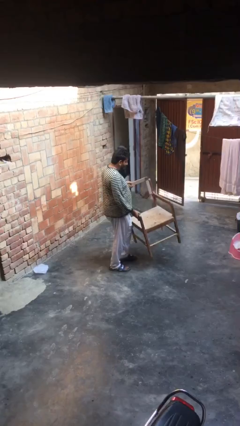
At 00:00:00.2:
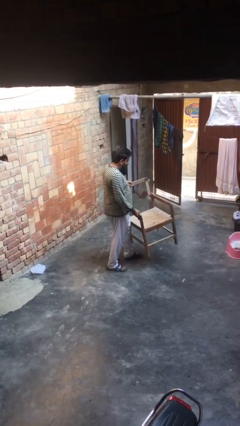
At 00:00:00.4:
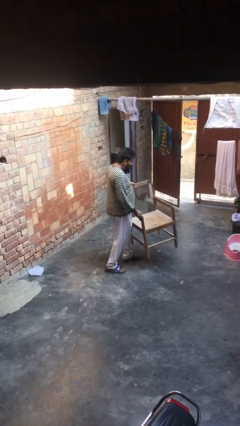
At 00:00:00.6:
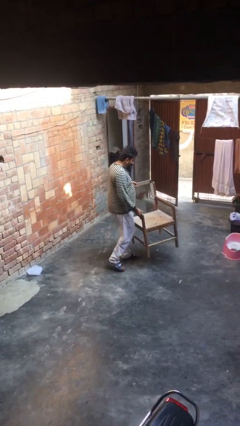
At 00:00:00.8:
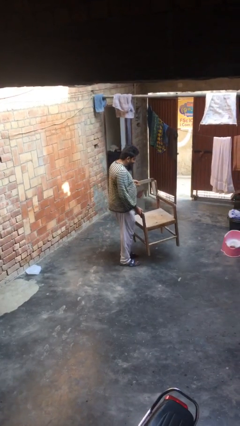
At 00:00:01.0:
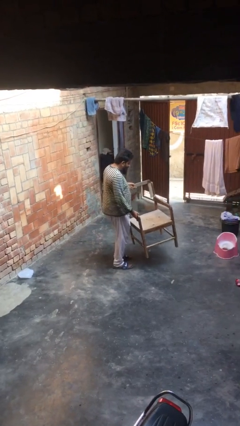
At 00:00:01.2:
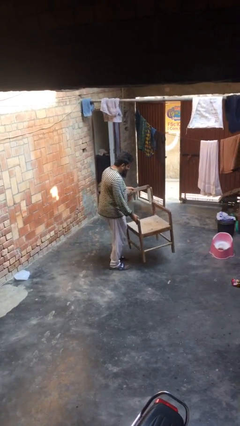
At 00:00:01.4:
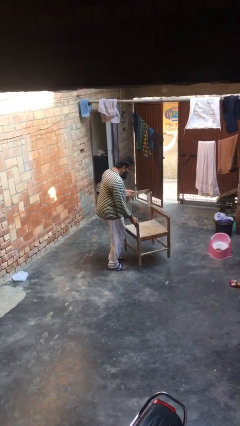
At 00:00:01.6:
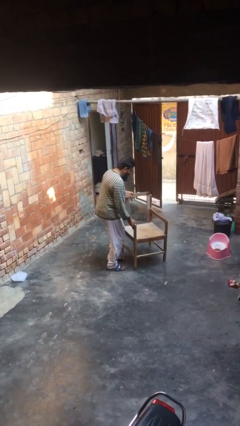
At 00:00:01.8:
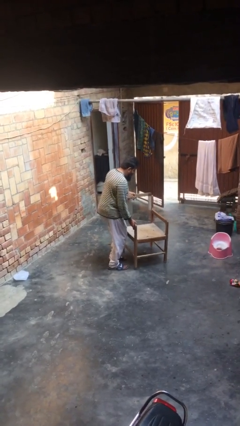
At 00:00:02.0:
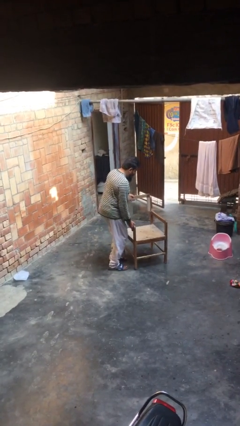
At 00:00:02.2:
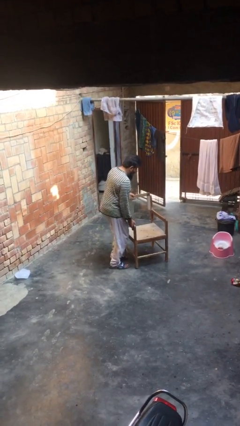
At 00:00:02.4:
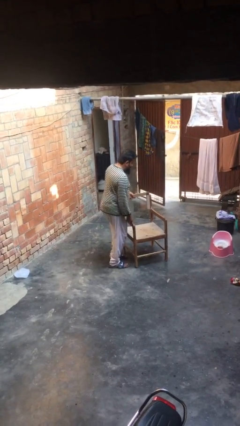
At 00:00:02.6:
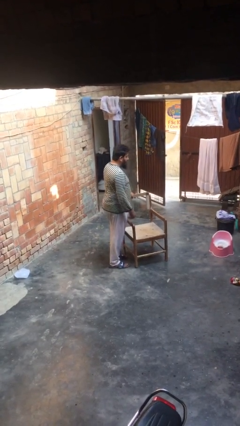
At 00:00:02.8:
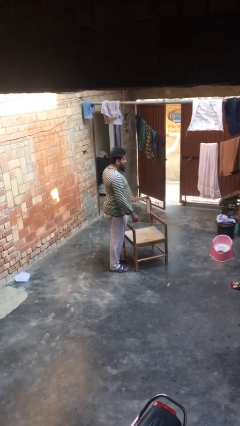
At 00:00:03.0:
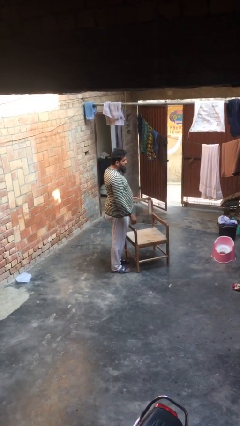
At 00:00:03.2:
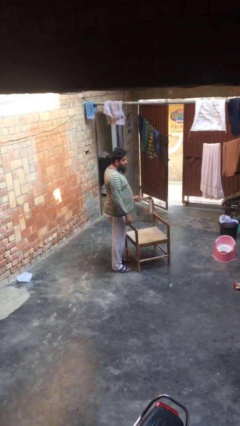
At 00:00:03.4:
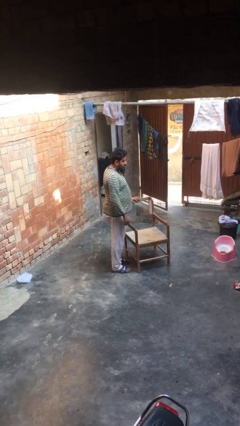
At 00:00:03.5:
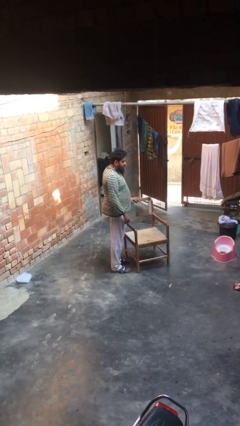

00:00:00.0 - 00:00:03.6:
person puts down object on floor

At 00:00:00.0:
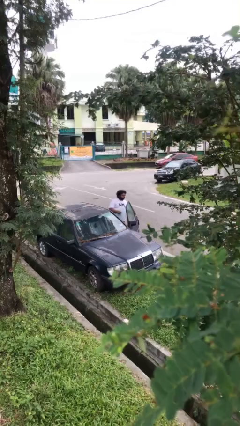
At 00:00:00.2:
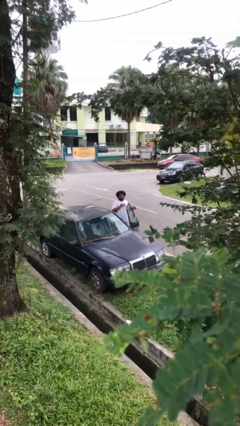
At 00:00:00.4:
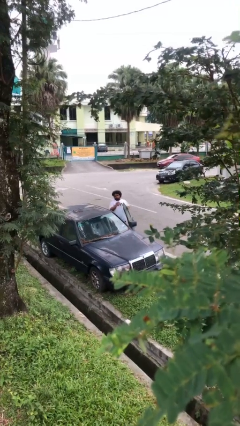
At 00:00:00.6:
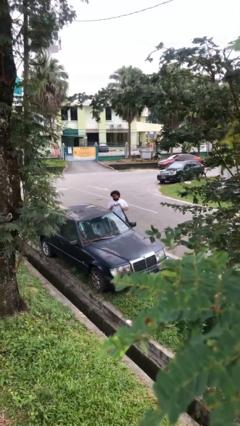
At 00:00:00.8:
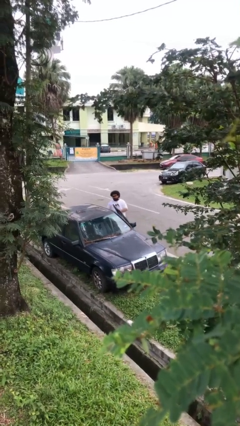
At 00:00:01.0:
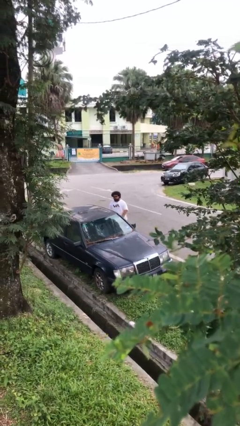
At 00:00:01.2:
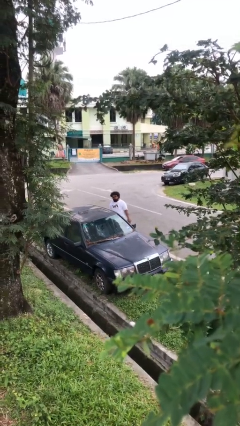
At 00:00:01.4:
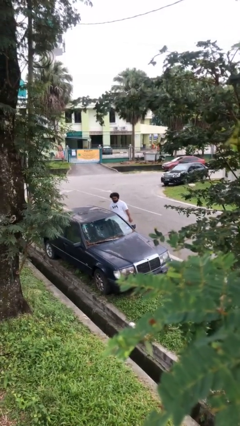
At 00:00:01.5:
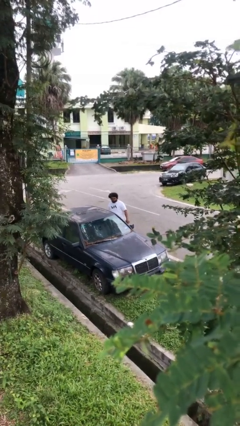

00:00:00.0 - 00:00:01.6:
person closes car door

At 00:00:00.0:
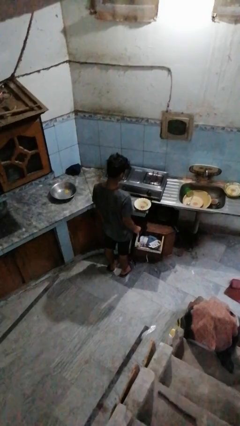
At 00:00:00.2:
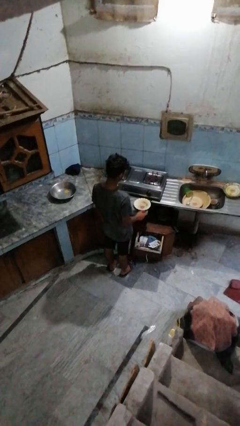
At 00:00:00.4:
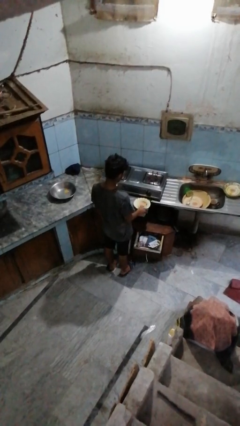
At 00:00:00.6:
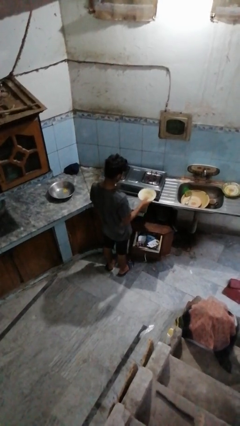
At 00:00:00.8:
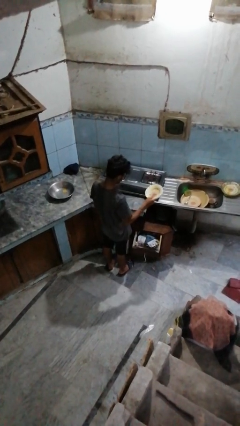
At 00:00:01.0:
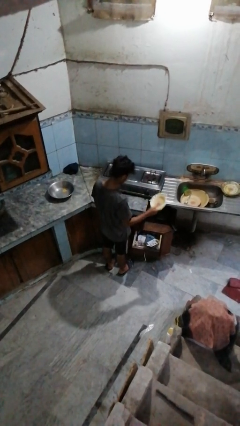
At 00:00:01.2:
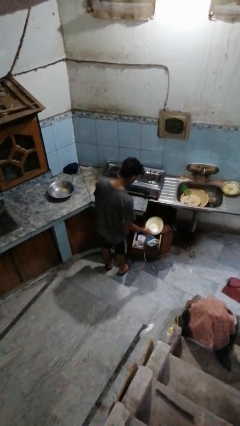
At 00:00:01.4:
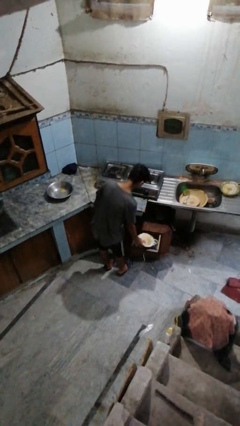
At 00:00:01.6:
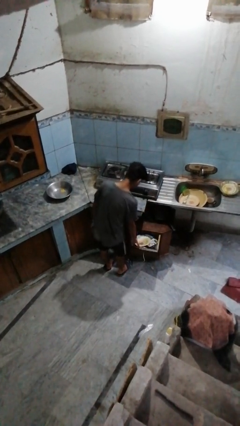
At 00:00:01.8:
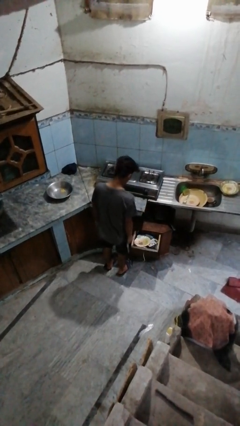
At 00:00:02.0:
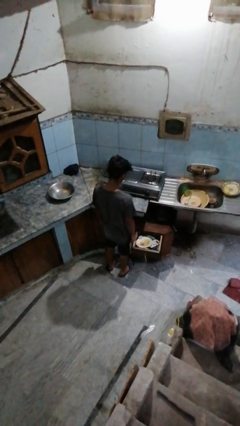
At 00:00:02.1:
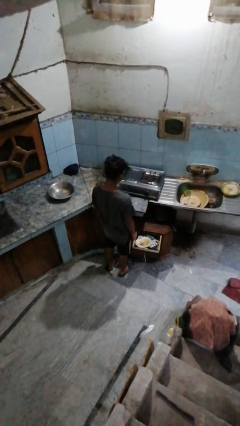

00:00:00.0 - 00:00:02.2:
person puts object into kitchen drawer

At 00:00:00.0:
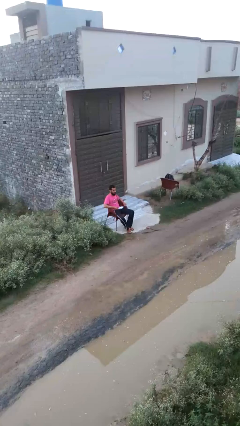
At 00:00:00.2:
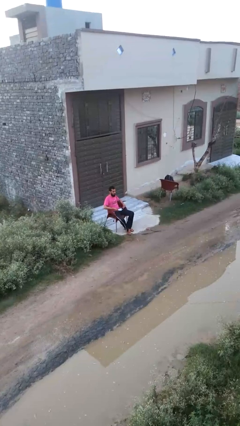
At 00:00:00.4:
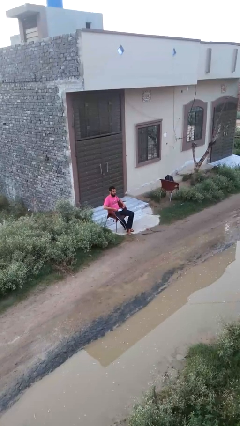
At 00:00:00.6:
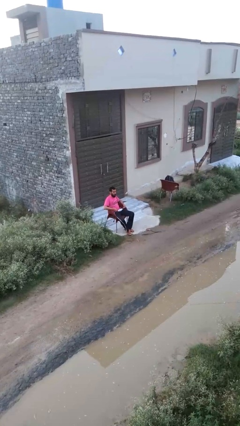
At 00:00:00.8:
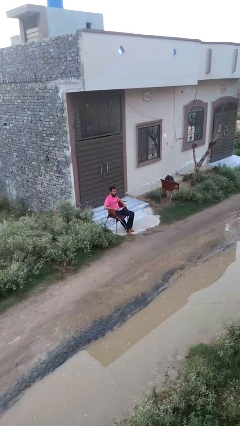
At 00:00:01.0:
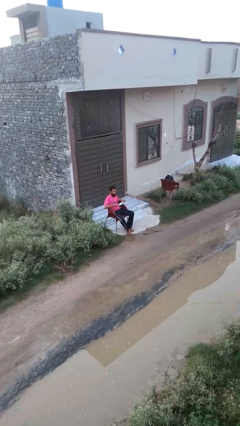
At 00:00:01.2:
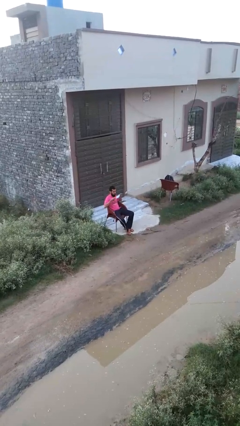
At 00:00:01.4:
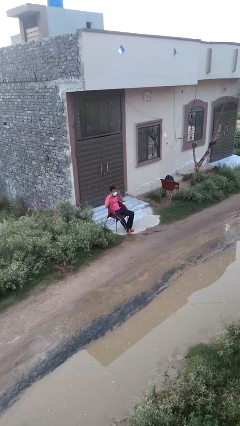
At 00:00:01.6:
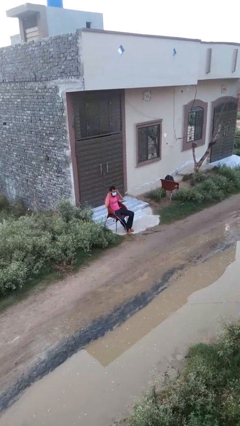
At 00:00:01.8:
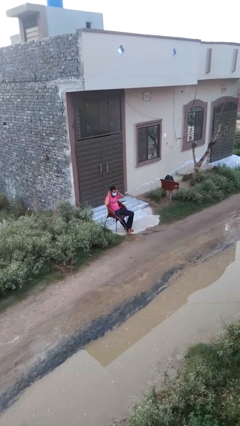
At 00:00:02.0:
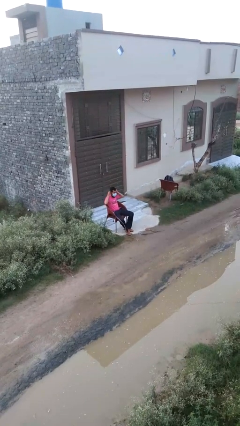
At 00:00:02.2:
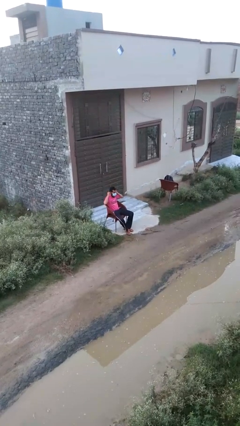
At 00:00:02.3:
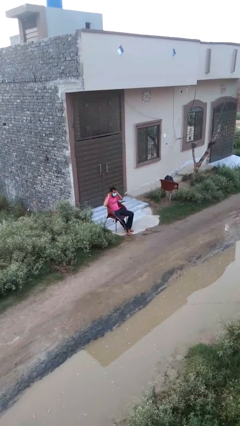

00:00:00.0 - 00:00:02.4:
person puts on facemask

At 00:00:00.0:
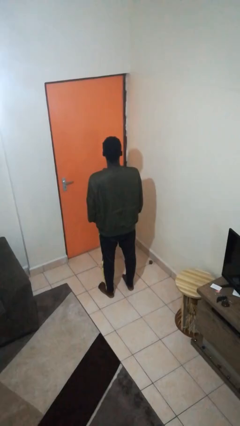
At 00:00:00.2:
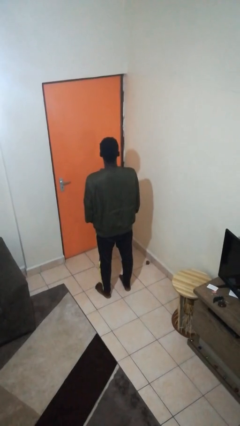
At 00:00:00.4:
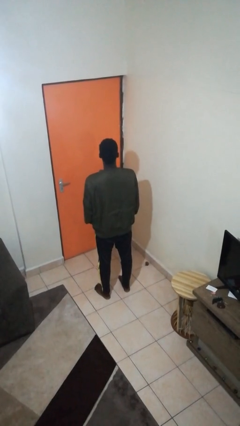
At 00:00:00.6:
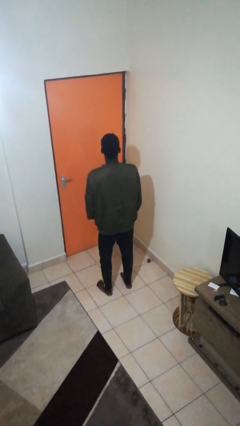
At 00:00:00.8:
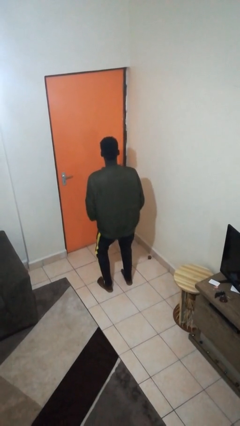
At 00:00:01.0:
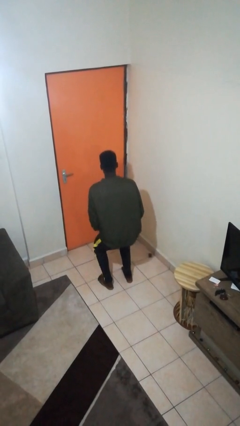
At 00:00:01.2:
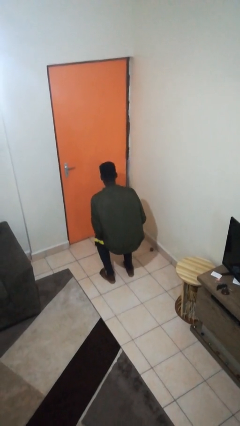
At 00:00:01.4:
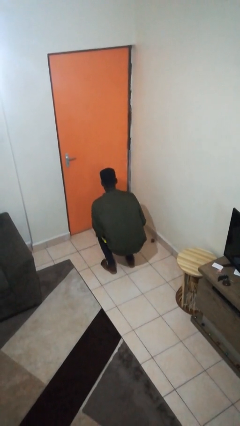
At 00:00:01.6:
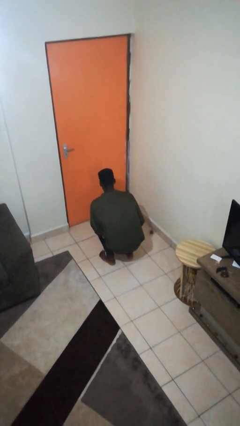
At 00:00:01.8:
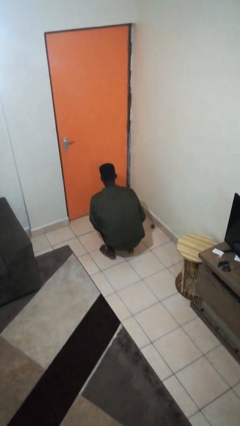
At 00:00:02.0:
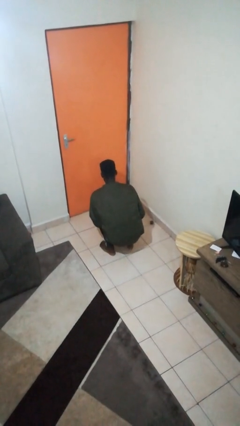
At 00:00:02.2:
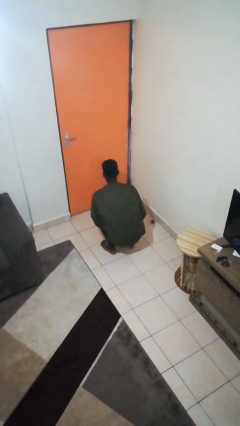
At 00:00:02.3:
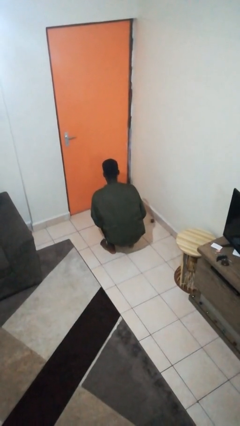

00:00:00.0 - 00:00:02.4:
person squats

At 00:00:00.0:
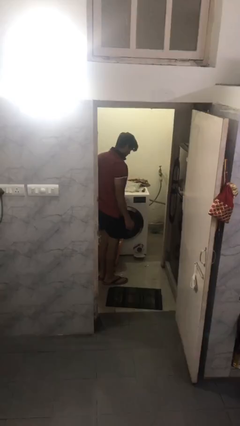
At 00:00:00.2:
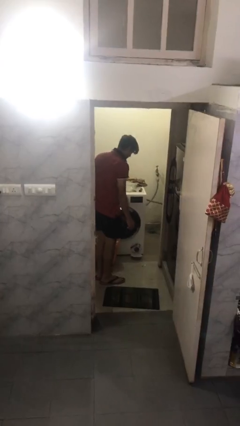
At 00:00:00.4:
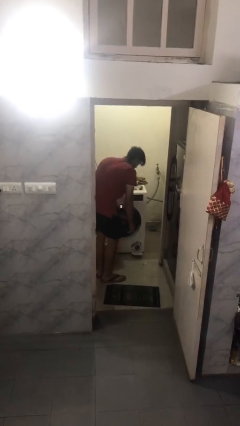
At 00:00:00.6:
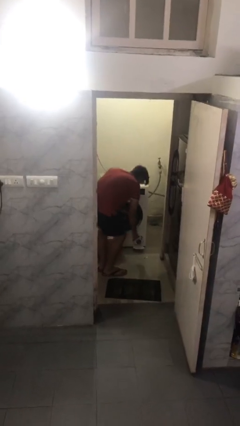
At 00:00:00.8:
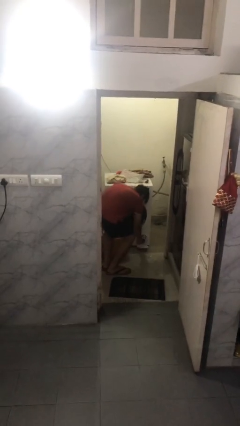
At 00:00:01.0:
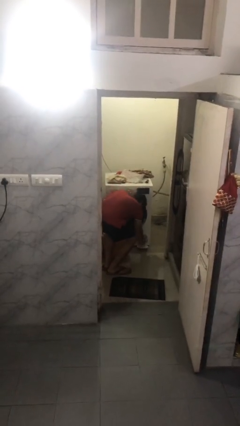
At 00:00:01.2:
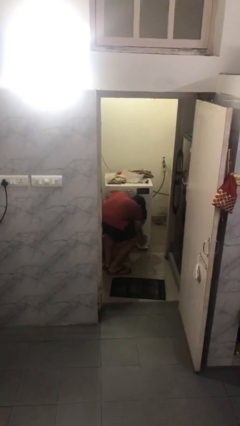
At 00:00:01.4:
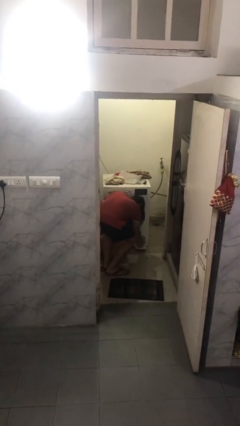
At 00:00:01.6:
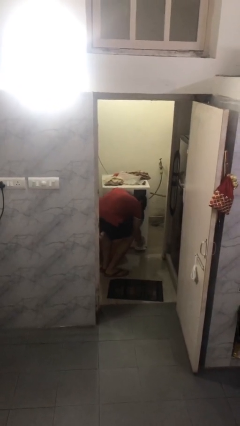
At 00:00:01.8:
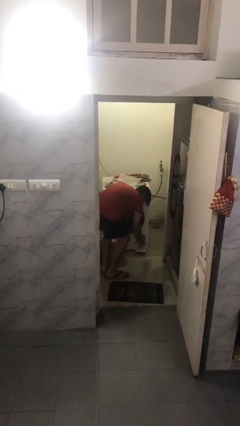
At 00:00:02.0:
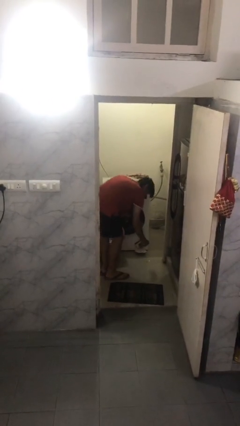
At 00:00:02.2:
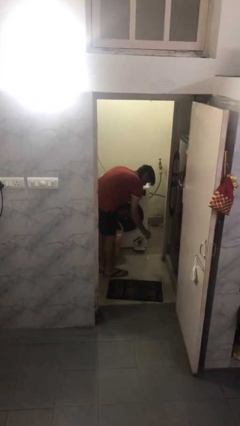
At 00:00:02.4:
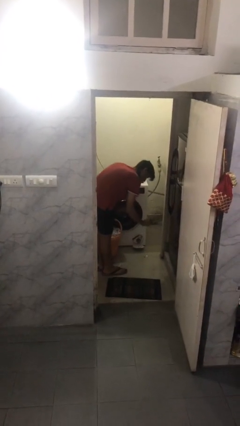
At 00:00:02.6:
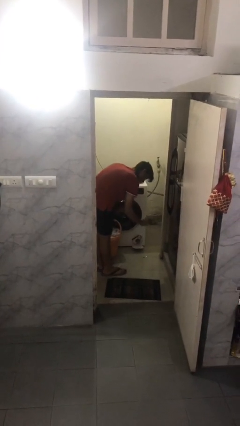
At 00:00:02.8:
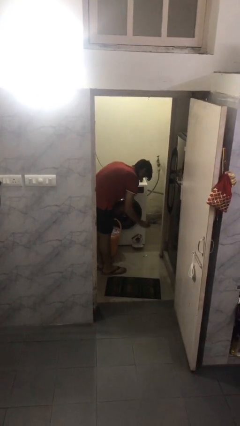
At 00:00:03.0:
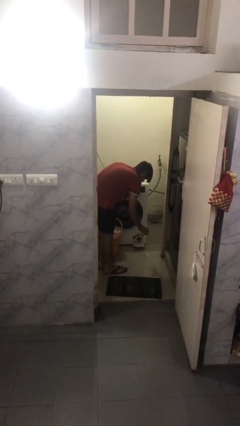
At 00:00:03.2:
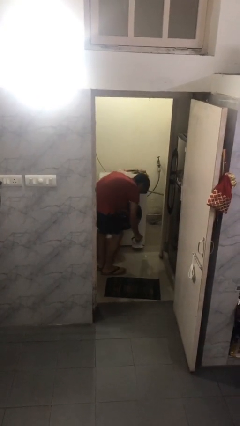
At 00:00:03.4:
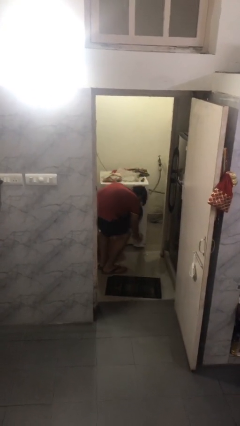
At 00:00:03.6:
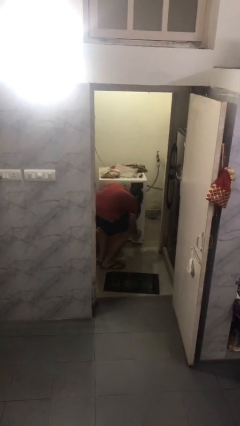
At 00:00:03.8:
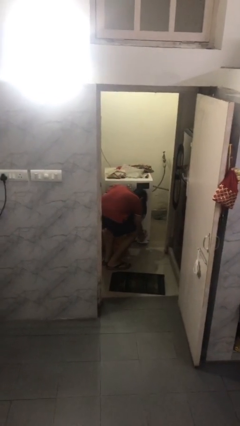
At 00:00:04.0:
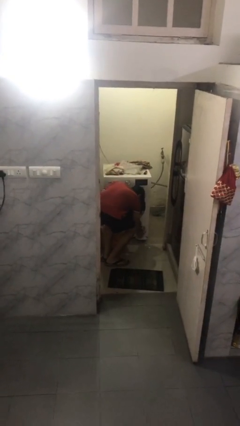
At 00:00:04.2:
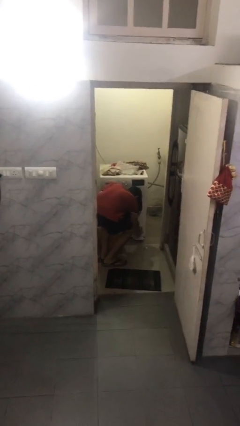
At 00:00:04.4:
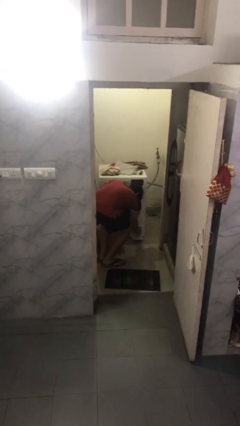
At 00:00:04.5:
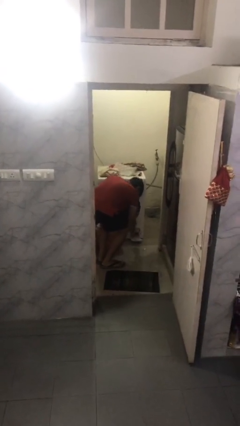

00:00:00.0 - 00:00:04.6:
person cleans dryer lint trap

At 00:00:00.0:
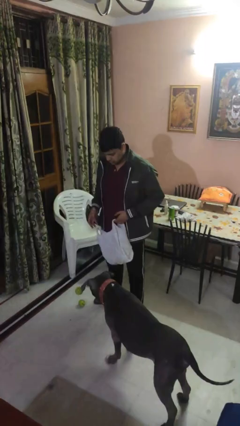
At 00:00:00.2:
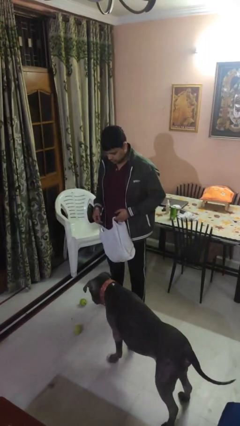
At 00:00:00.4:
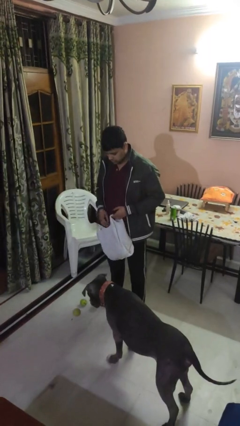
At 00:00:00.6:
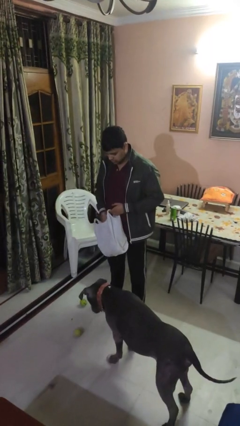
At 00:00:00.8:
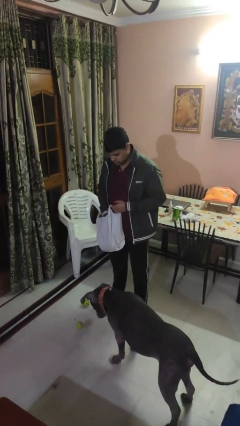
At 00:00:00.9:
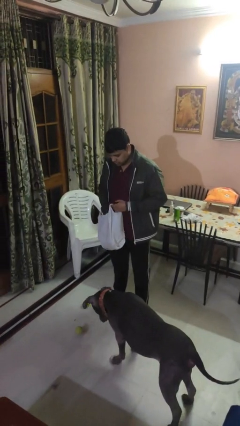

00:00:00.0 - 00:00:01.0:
person throws object to dog
